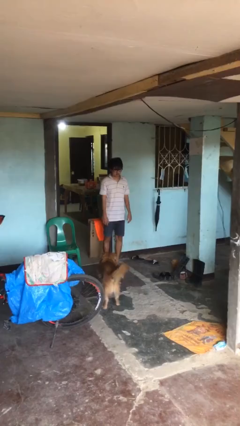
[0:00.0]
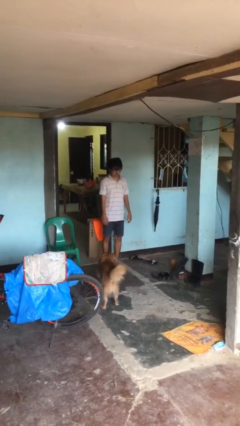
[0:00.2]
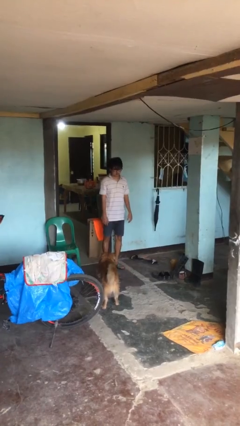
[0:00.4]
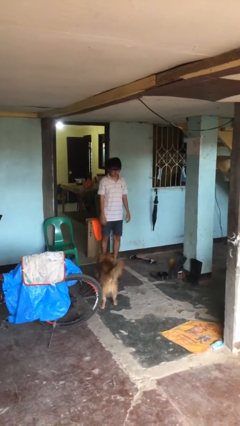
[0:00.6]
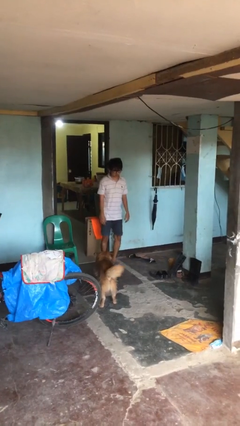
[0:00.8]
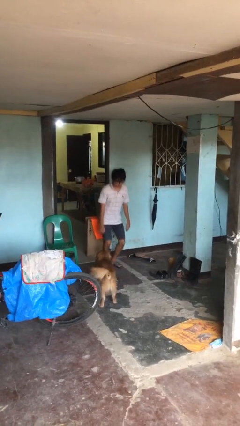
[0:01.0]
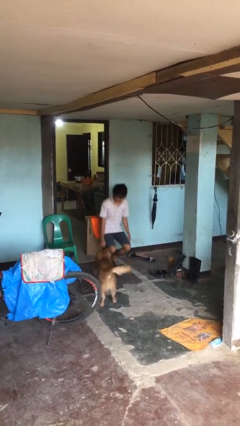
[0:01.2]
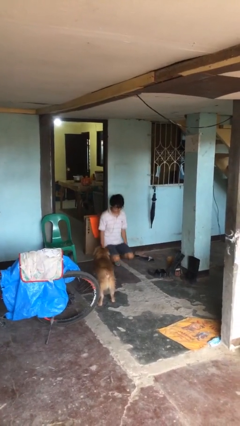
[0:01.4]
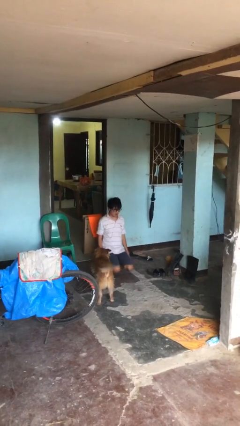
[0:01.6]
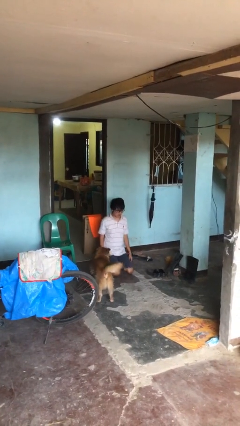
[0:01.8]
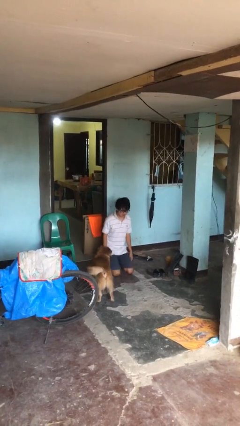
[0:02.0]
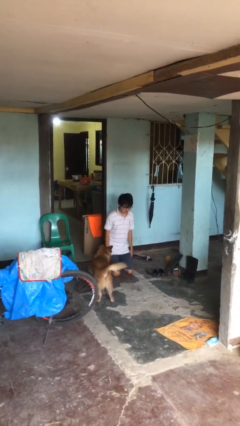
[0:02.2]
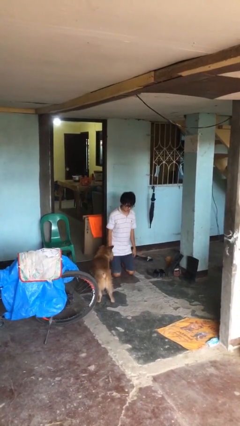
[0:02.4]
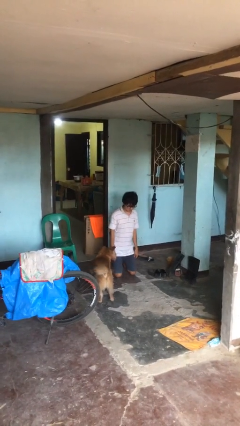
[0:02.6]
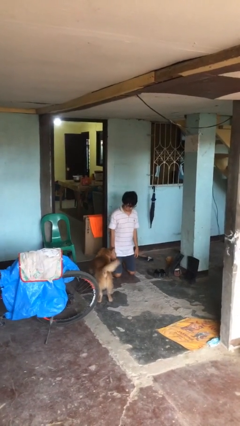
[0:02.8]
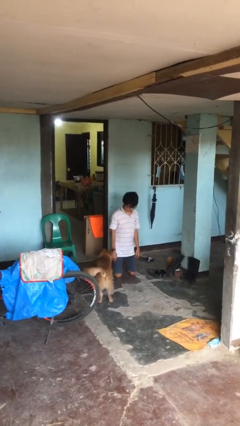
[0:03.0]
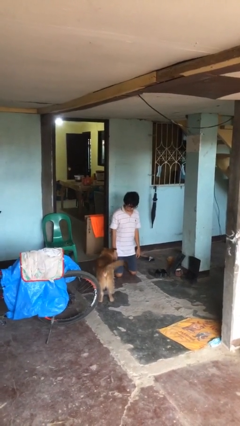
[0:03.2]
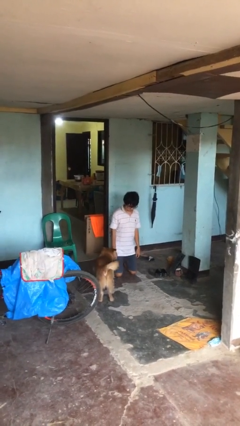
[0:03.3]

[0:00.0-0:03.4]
person kneels

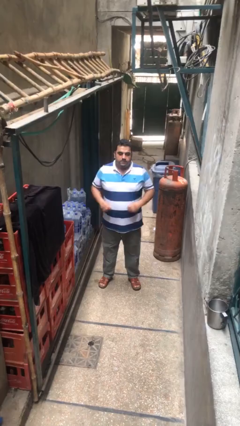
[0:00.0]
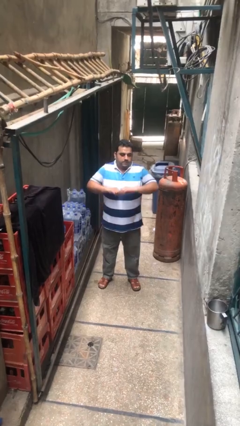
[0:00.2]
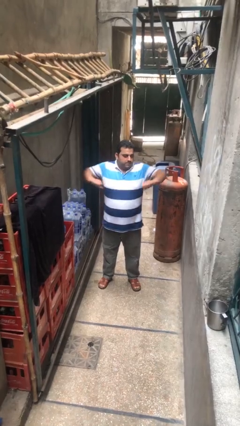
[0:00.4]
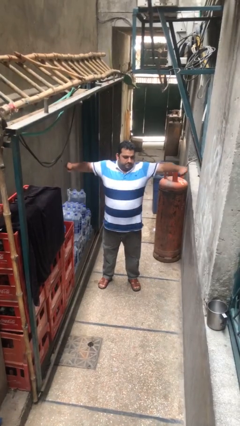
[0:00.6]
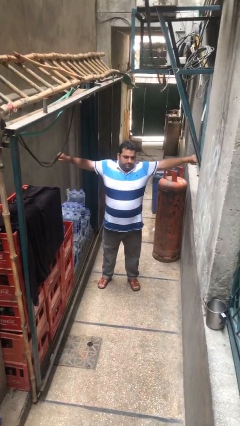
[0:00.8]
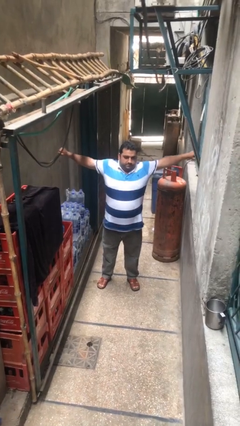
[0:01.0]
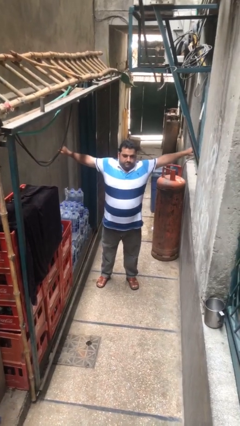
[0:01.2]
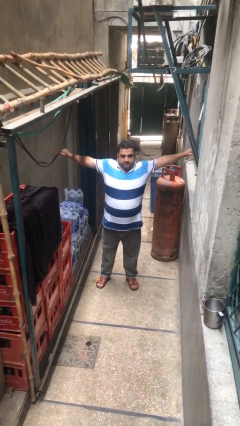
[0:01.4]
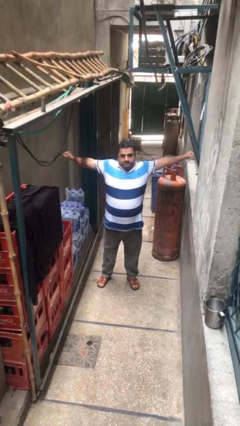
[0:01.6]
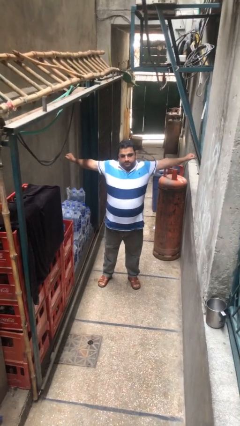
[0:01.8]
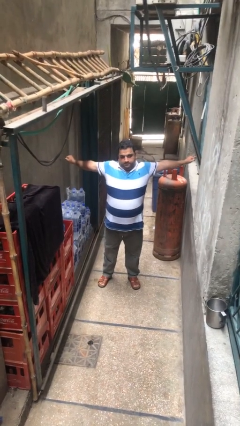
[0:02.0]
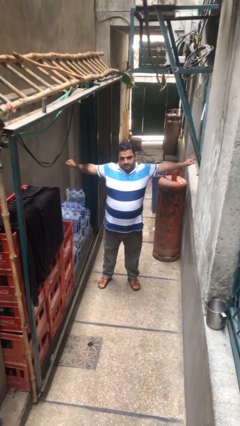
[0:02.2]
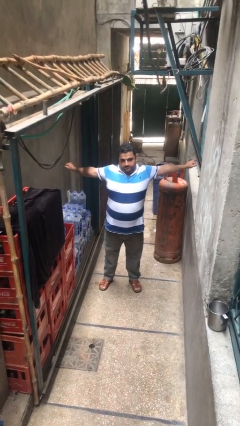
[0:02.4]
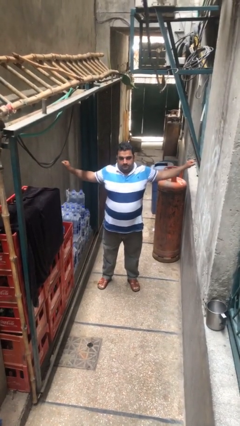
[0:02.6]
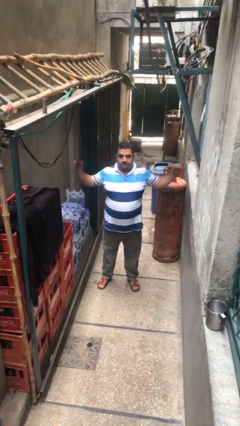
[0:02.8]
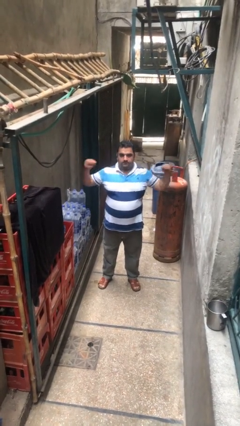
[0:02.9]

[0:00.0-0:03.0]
person stretches arms to side

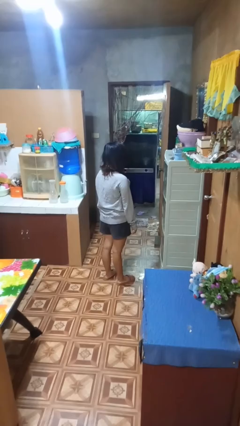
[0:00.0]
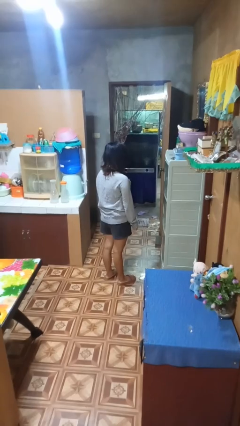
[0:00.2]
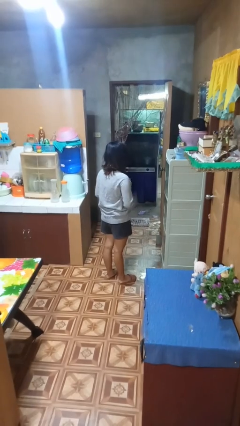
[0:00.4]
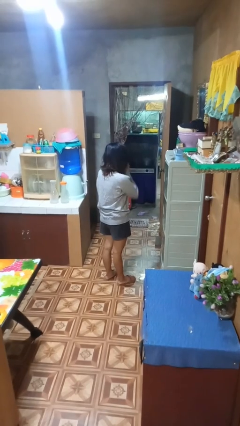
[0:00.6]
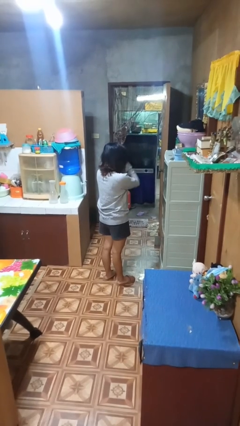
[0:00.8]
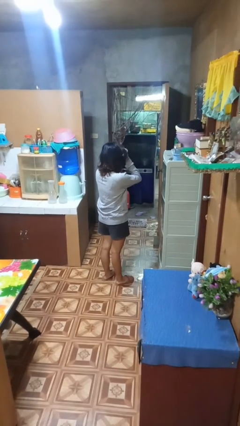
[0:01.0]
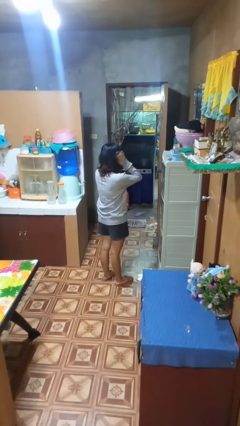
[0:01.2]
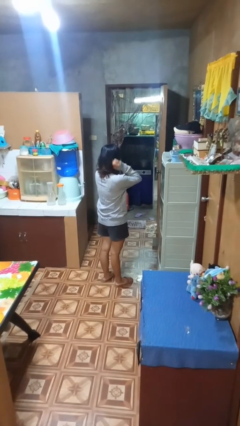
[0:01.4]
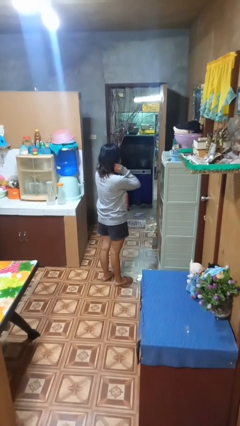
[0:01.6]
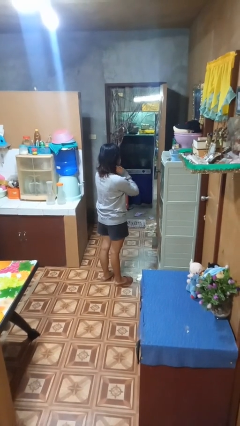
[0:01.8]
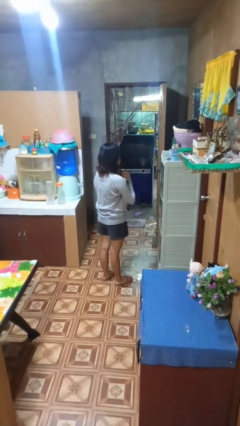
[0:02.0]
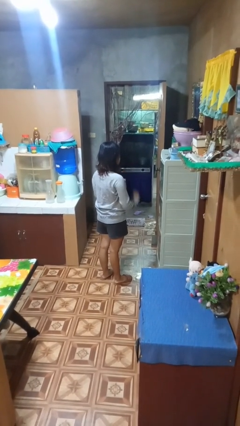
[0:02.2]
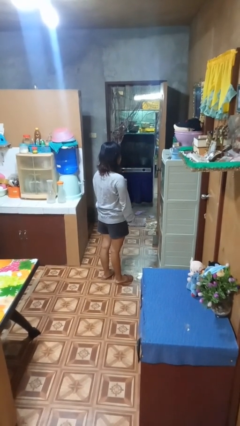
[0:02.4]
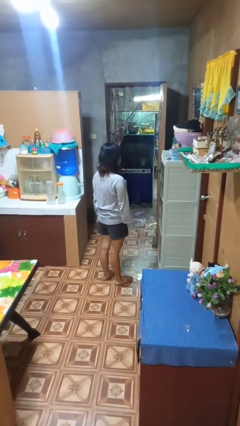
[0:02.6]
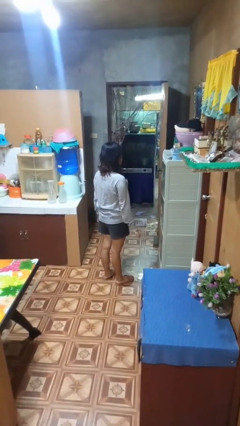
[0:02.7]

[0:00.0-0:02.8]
person strokes hair

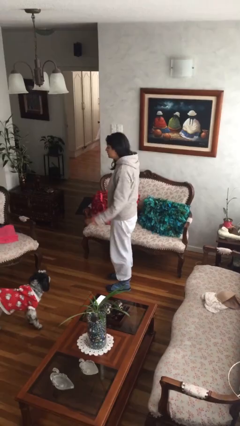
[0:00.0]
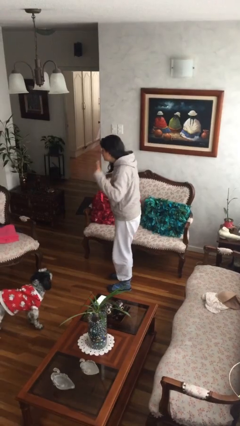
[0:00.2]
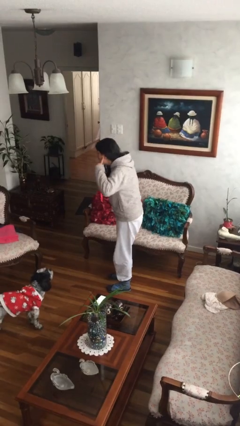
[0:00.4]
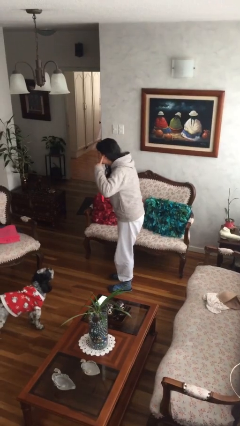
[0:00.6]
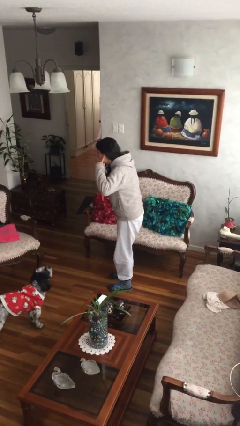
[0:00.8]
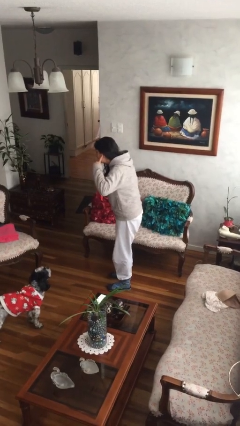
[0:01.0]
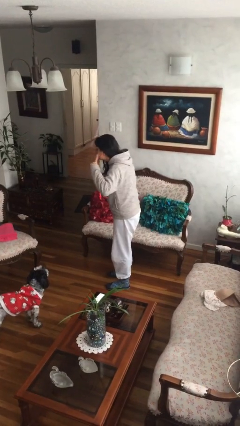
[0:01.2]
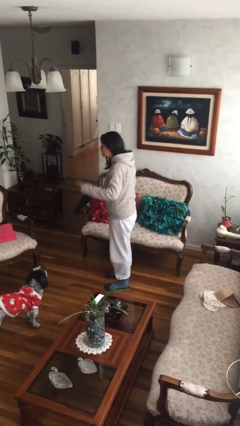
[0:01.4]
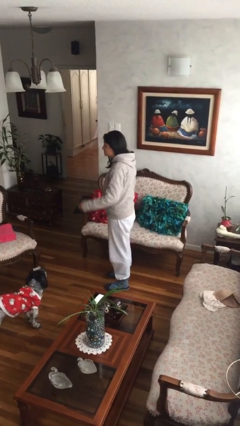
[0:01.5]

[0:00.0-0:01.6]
person gestures listen closely

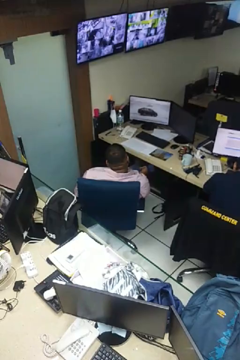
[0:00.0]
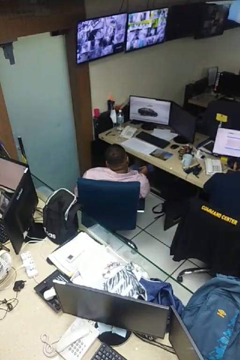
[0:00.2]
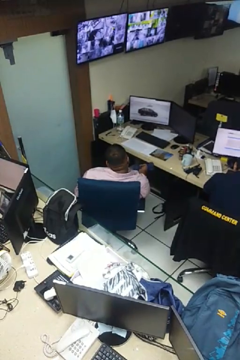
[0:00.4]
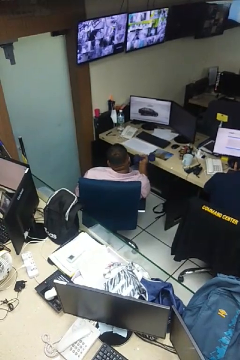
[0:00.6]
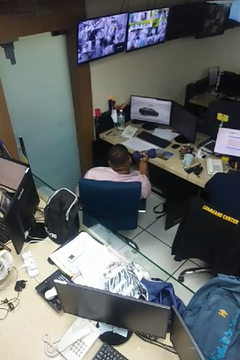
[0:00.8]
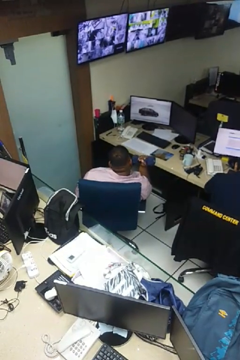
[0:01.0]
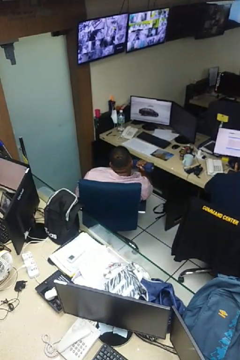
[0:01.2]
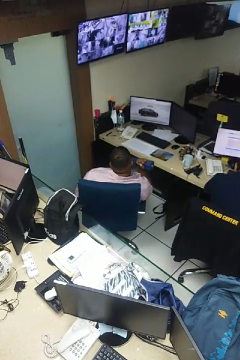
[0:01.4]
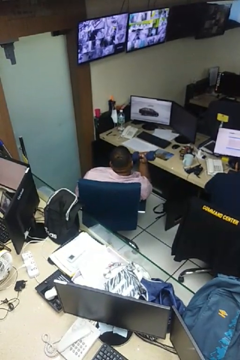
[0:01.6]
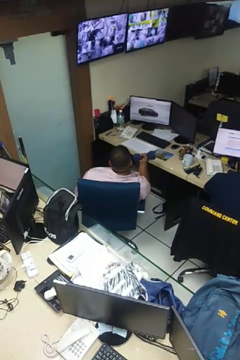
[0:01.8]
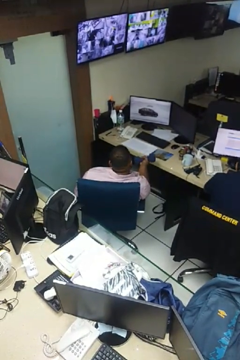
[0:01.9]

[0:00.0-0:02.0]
person lifts dumbbells

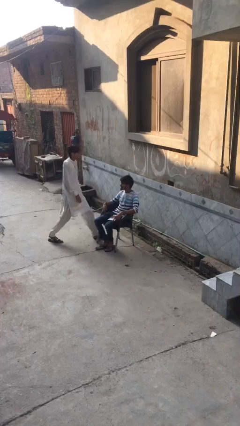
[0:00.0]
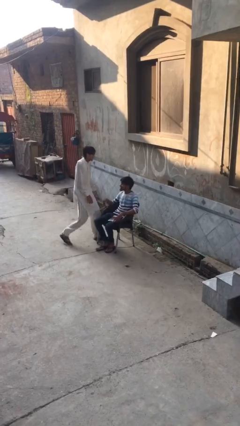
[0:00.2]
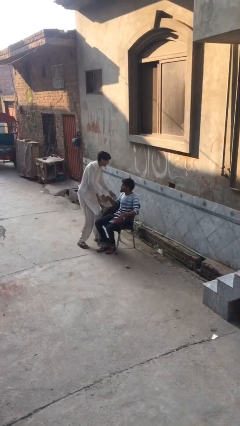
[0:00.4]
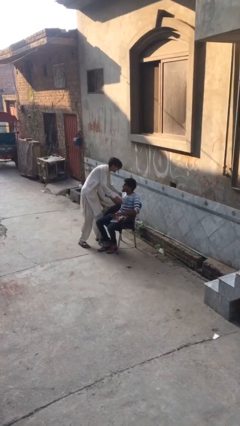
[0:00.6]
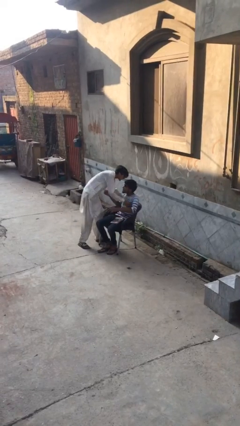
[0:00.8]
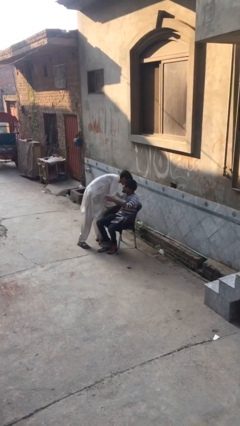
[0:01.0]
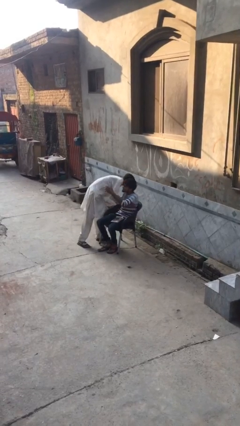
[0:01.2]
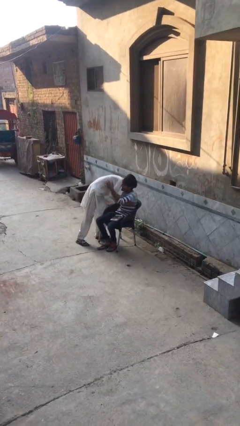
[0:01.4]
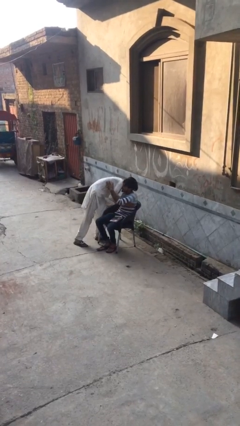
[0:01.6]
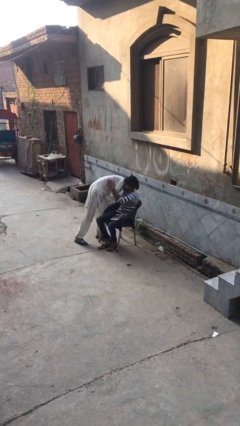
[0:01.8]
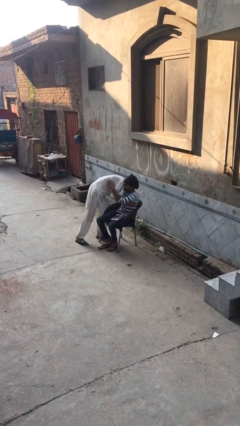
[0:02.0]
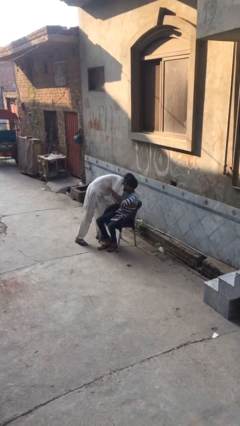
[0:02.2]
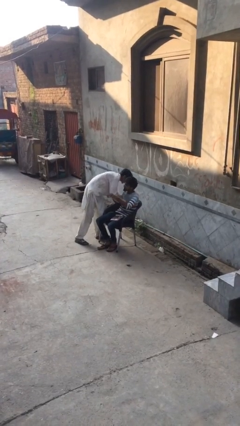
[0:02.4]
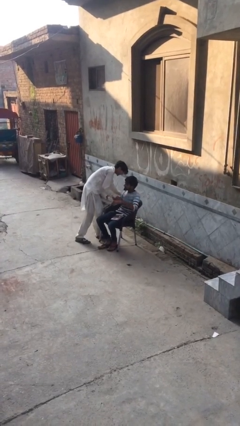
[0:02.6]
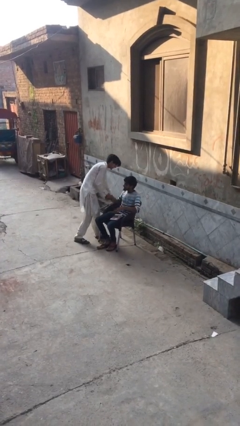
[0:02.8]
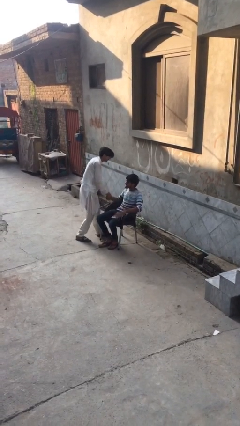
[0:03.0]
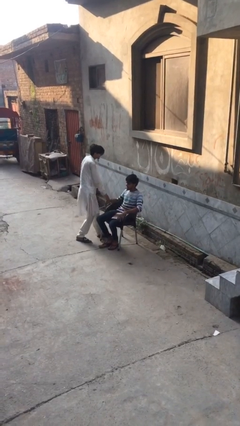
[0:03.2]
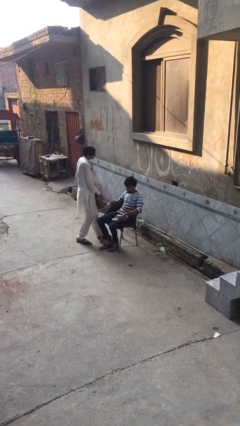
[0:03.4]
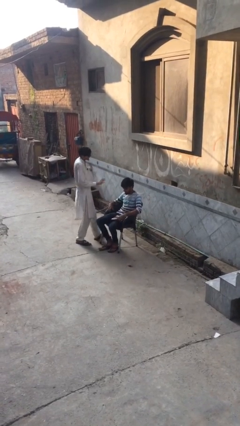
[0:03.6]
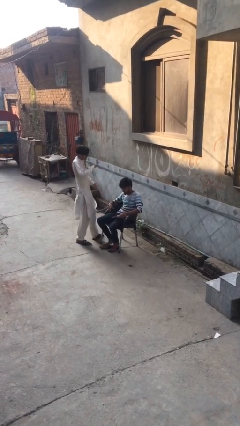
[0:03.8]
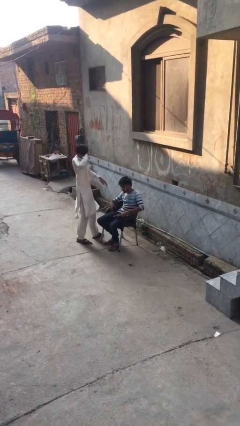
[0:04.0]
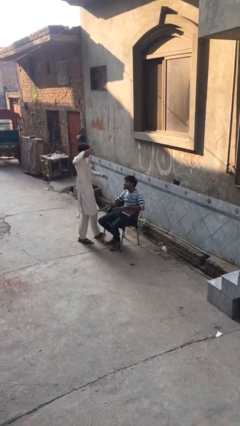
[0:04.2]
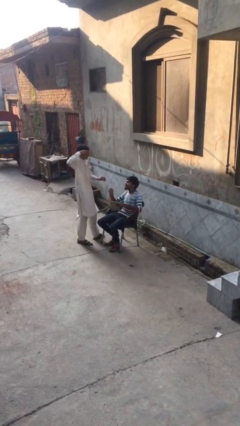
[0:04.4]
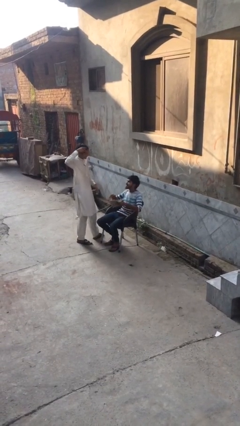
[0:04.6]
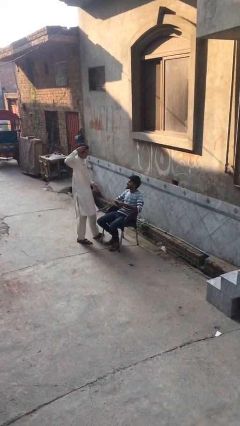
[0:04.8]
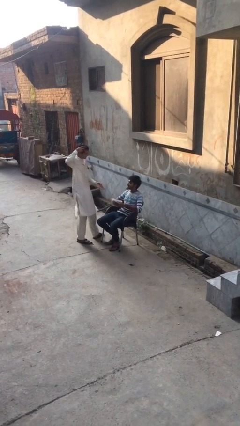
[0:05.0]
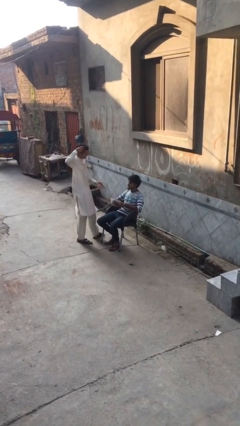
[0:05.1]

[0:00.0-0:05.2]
person embraces person
